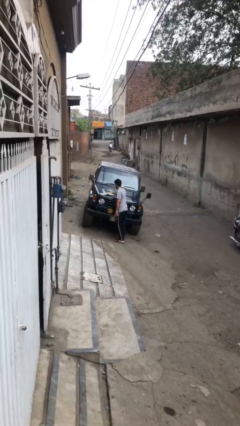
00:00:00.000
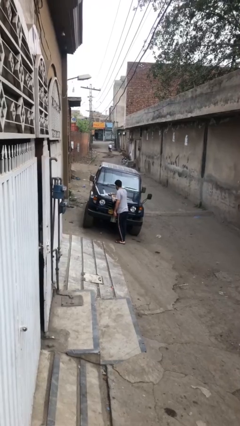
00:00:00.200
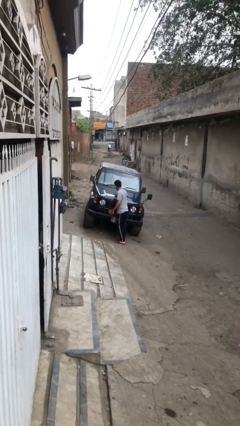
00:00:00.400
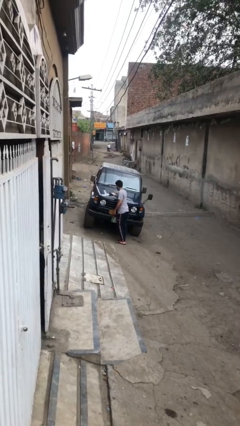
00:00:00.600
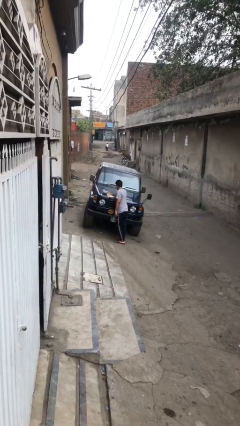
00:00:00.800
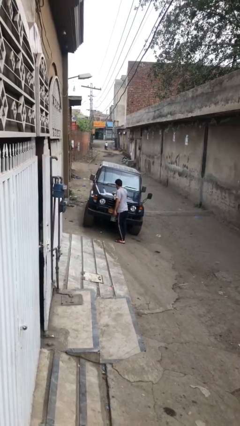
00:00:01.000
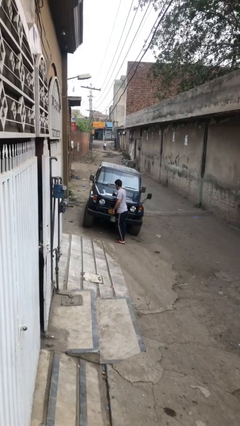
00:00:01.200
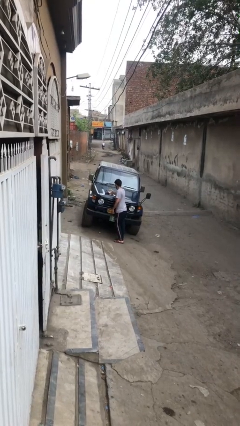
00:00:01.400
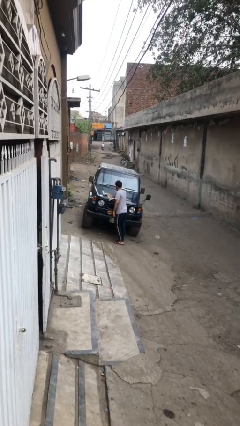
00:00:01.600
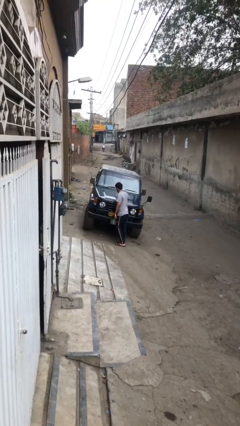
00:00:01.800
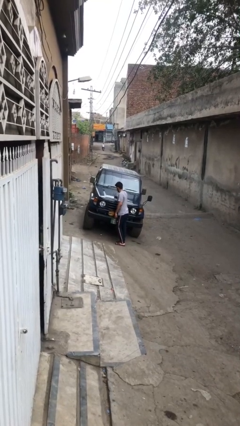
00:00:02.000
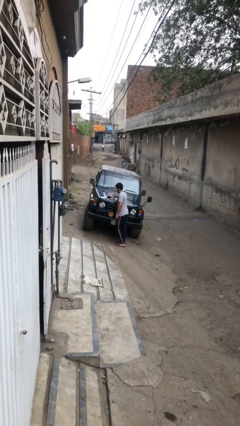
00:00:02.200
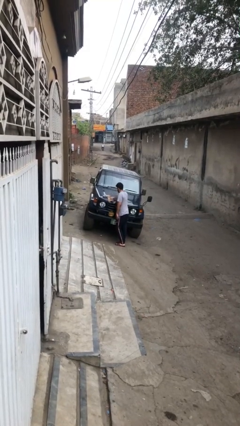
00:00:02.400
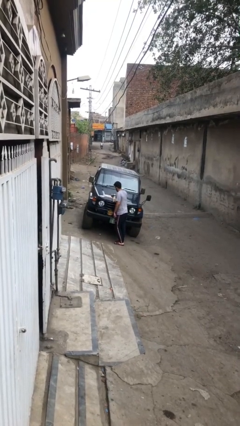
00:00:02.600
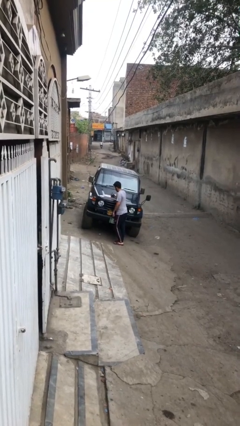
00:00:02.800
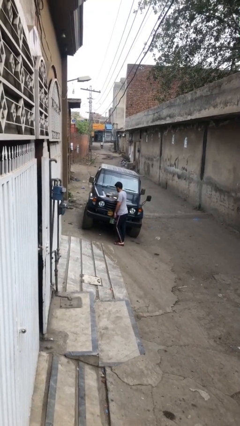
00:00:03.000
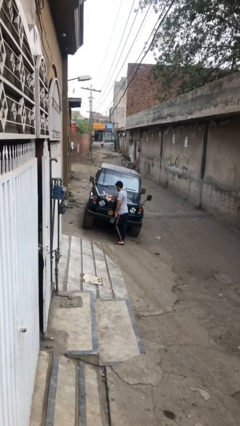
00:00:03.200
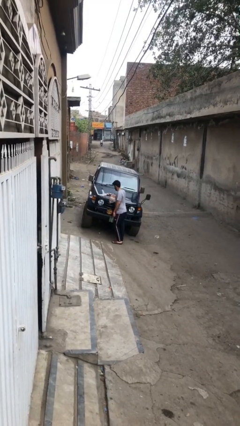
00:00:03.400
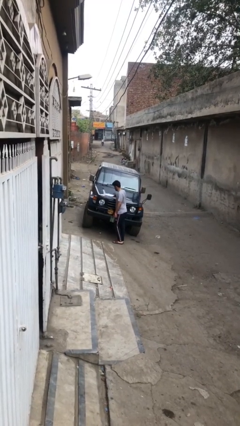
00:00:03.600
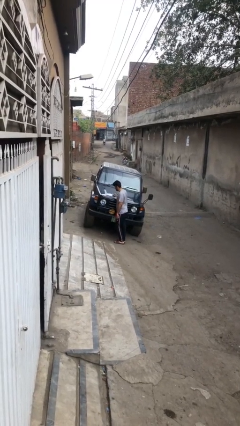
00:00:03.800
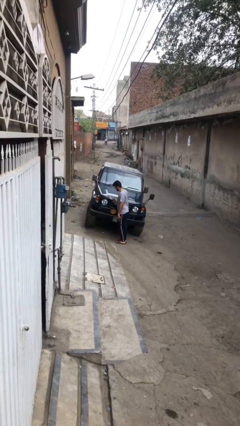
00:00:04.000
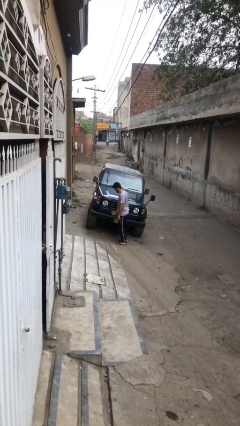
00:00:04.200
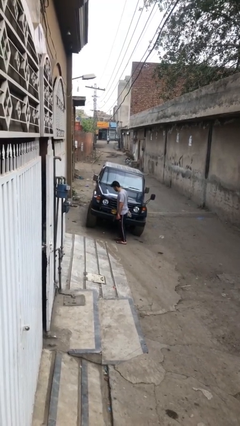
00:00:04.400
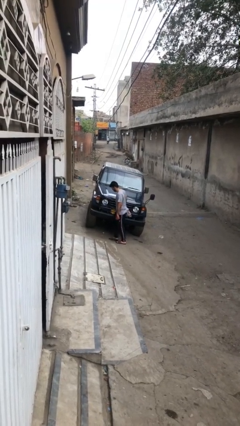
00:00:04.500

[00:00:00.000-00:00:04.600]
person polishes car with rag

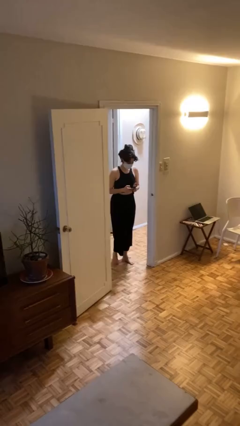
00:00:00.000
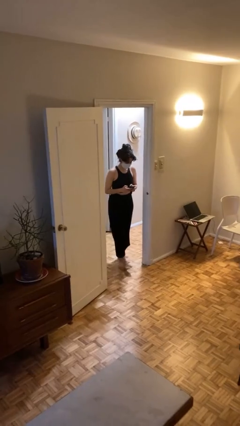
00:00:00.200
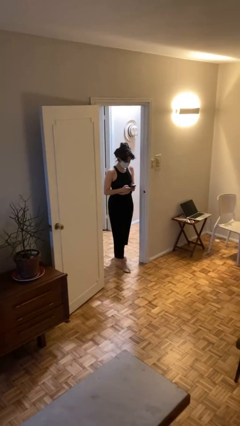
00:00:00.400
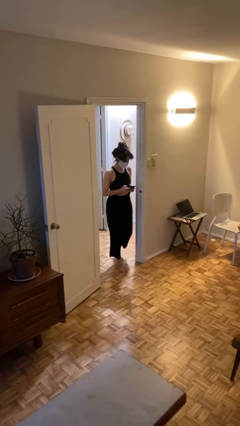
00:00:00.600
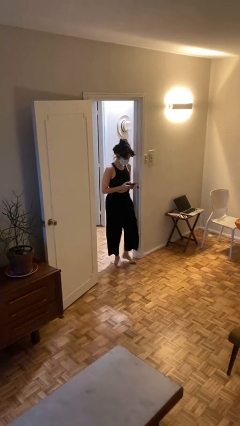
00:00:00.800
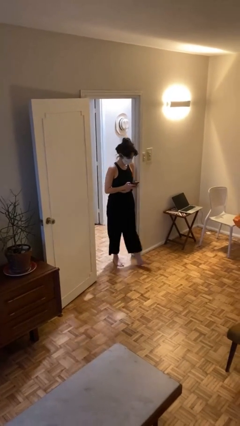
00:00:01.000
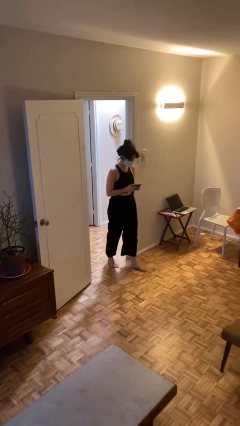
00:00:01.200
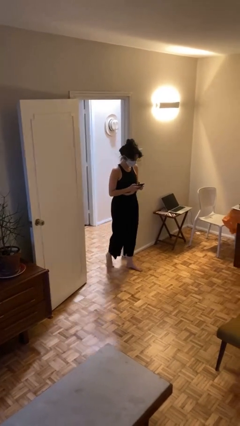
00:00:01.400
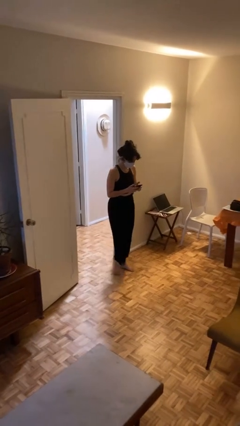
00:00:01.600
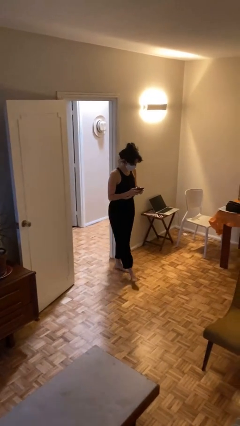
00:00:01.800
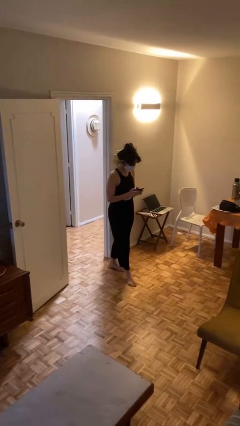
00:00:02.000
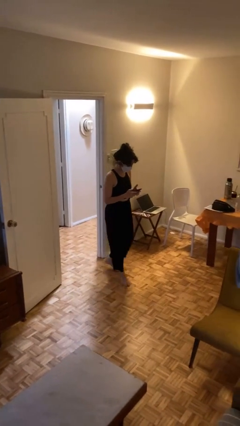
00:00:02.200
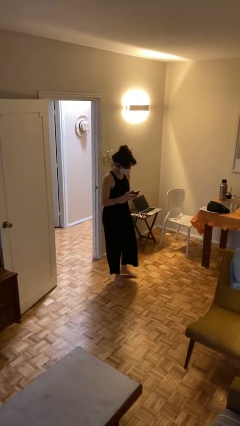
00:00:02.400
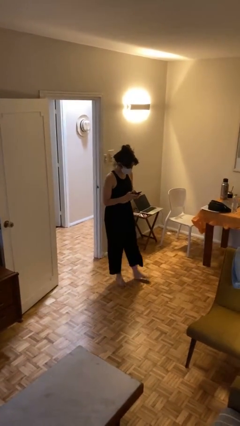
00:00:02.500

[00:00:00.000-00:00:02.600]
person enters scene through structure

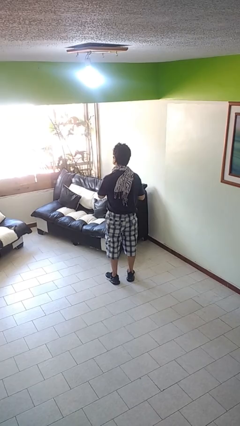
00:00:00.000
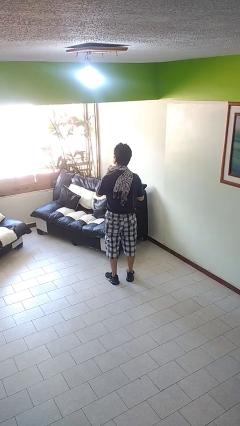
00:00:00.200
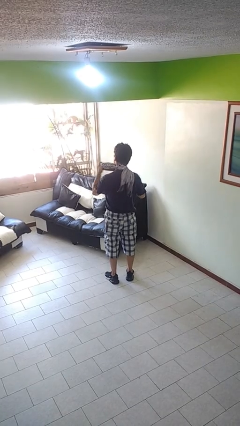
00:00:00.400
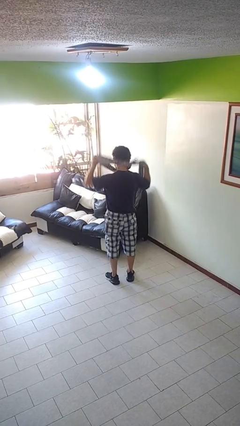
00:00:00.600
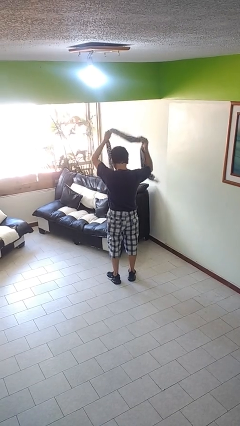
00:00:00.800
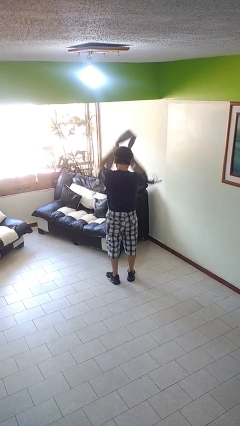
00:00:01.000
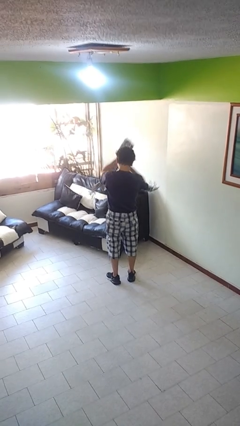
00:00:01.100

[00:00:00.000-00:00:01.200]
person takes off scarf

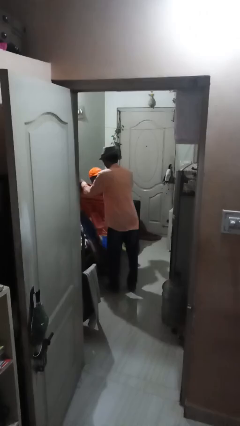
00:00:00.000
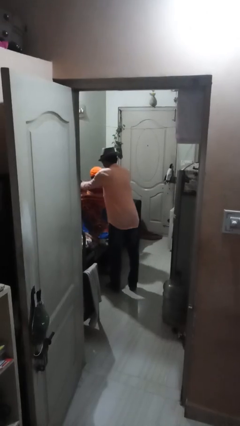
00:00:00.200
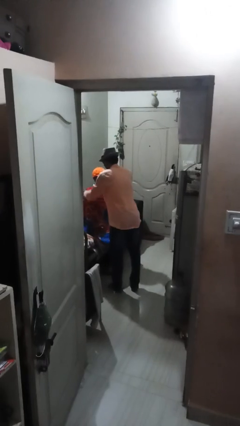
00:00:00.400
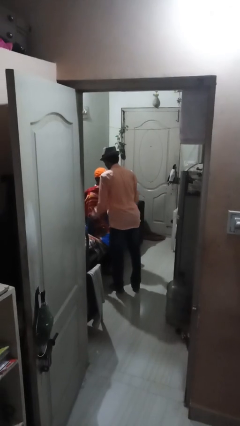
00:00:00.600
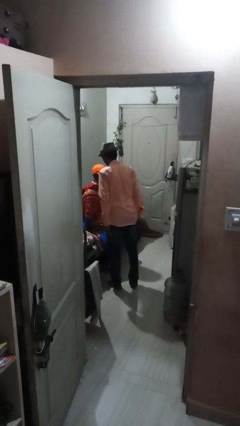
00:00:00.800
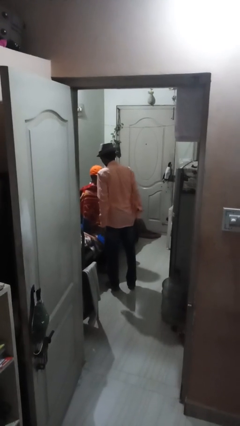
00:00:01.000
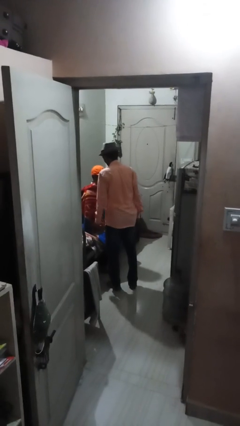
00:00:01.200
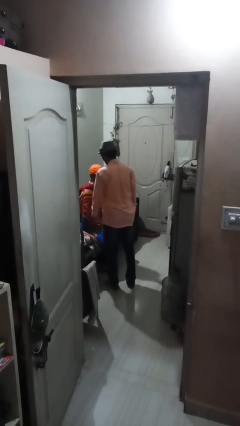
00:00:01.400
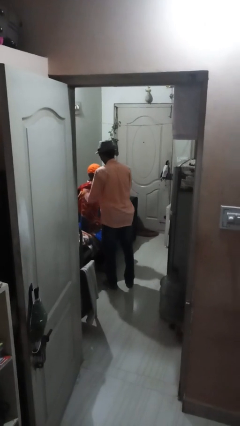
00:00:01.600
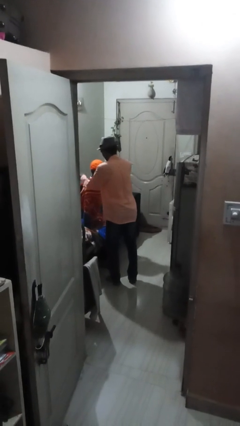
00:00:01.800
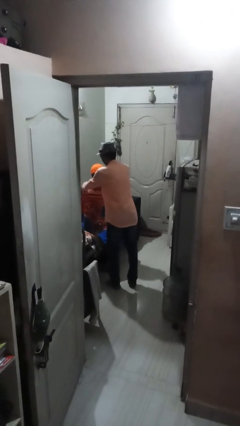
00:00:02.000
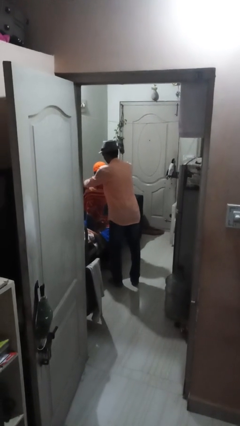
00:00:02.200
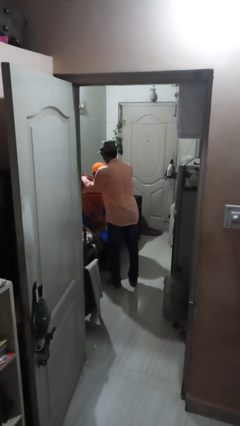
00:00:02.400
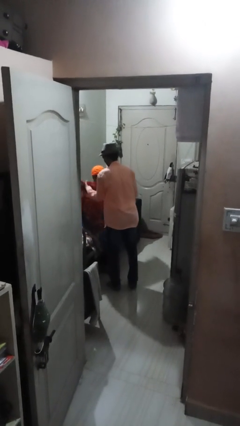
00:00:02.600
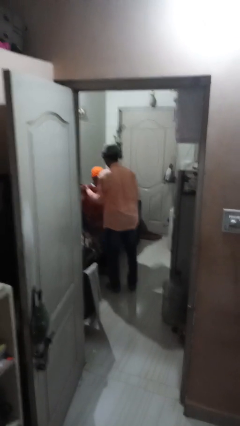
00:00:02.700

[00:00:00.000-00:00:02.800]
person covers friend with blanket

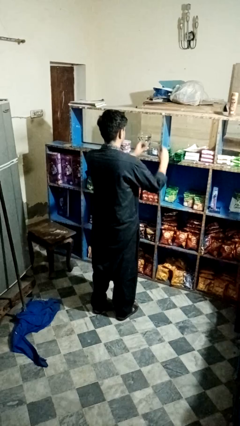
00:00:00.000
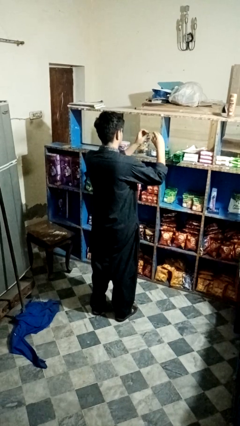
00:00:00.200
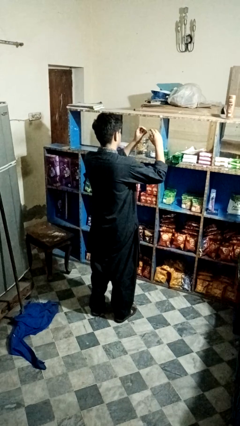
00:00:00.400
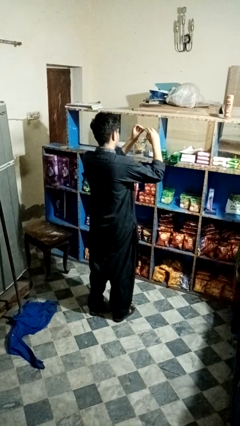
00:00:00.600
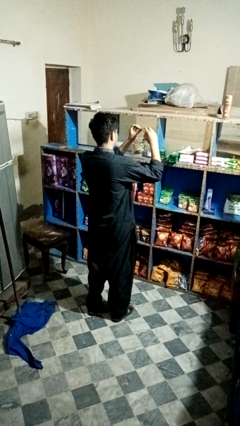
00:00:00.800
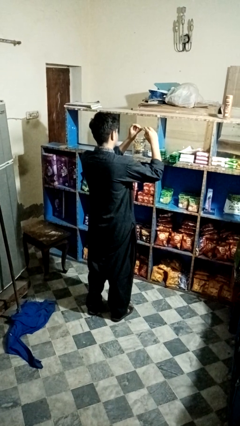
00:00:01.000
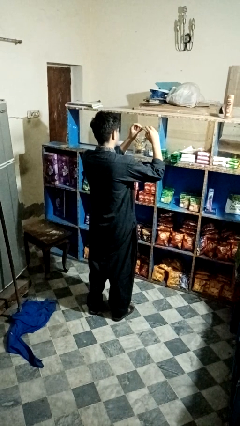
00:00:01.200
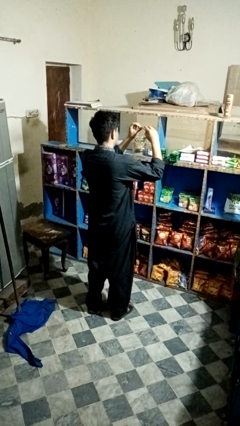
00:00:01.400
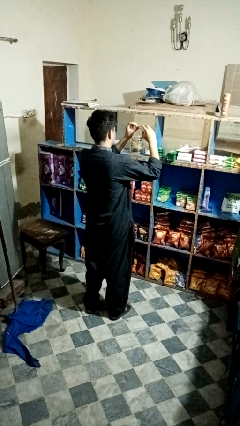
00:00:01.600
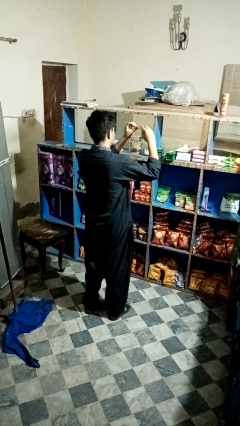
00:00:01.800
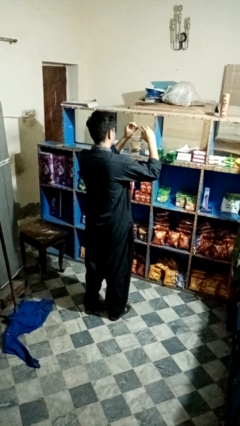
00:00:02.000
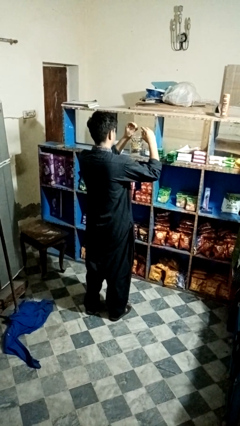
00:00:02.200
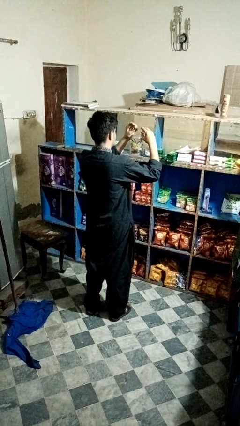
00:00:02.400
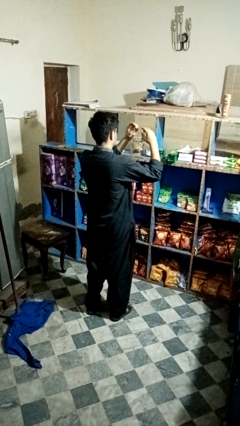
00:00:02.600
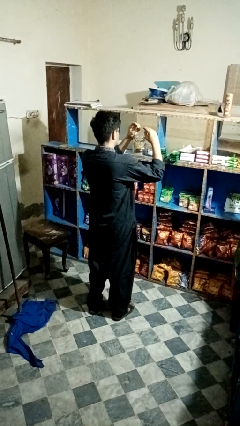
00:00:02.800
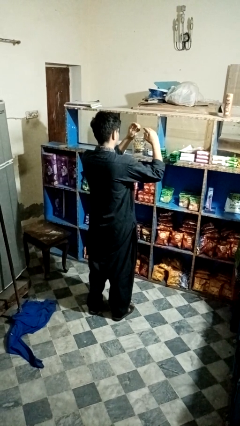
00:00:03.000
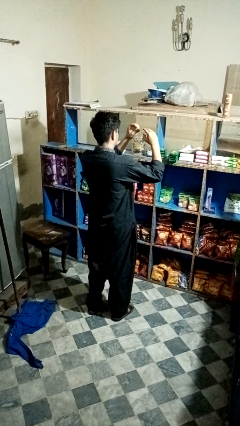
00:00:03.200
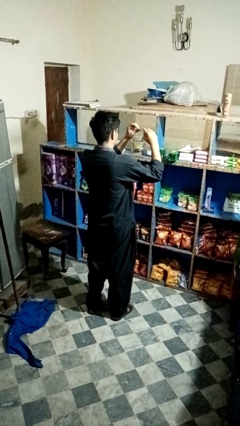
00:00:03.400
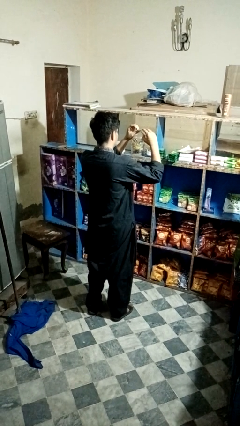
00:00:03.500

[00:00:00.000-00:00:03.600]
person clips fingernails

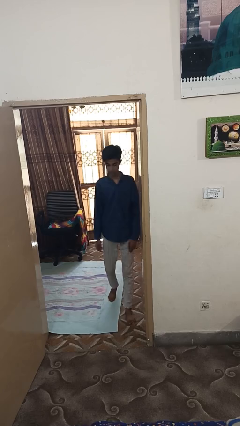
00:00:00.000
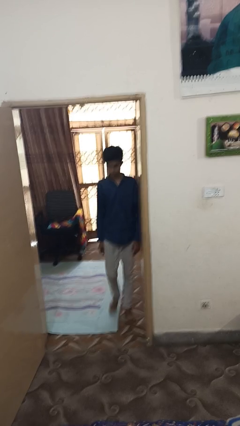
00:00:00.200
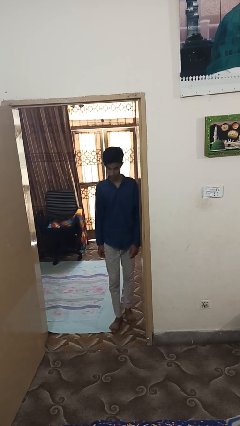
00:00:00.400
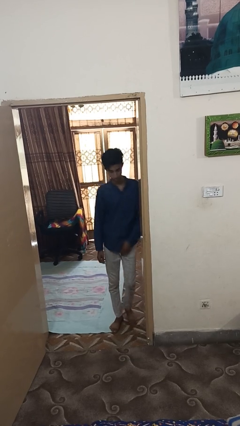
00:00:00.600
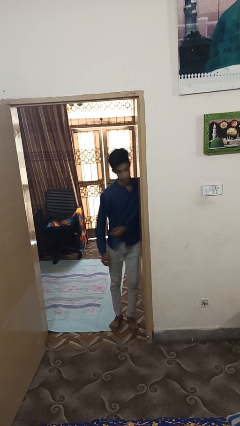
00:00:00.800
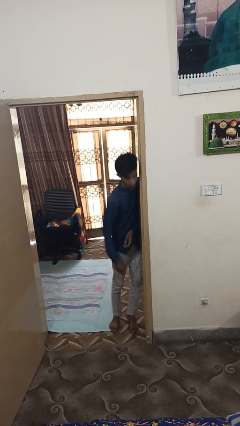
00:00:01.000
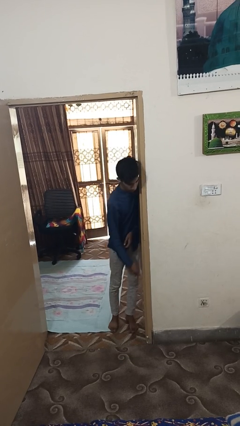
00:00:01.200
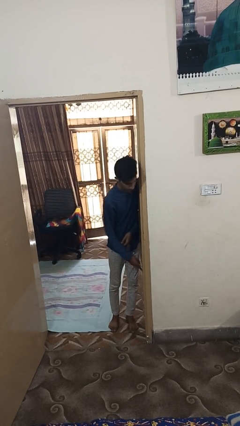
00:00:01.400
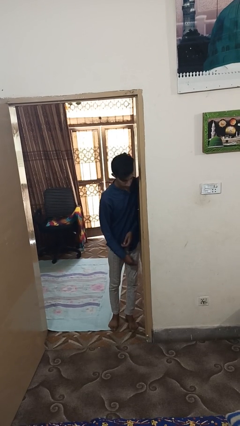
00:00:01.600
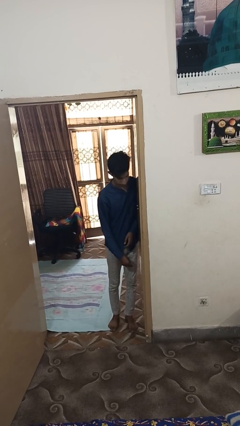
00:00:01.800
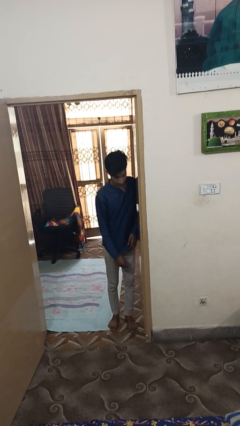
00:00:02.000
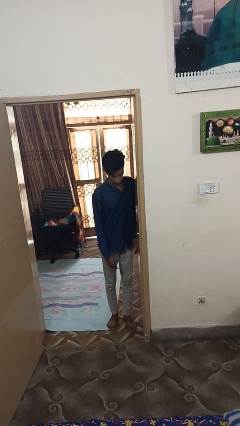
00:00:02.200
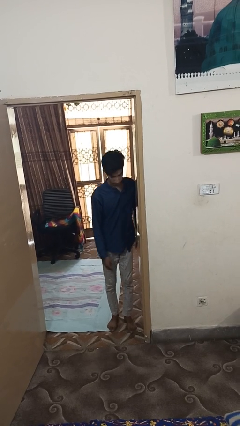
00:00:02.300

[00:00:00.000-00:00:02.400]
person bumps into wall

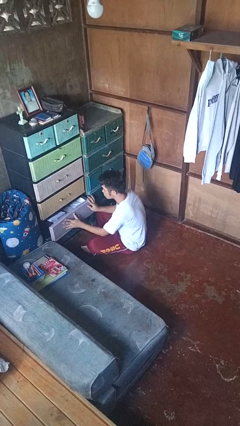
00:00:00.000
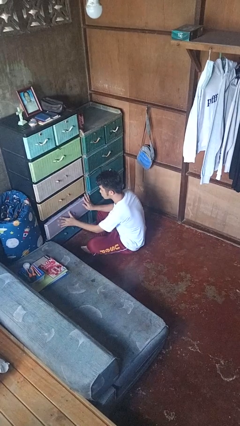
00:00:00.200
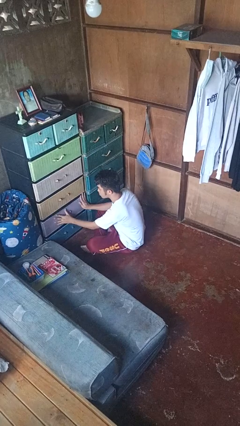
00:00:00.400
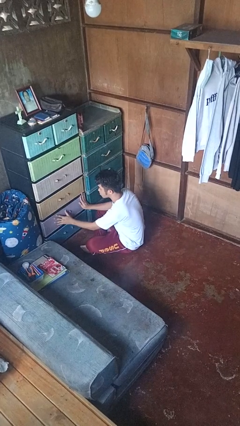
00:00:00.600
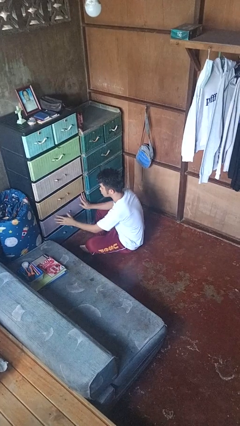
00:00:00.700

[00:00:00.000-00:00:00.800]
person closes dresser drawer
